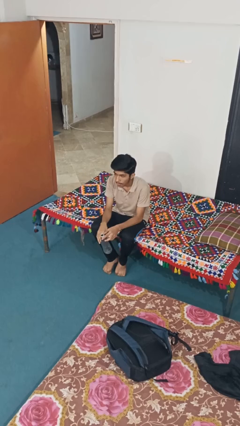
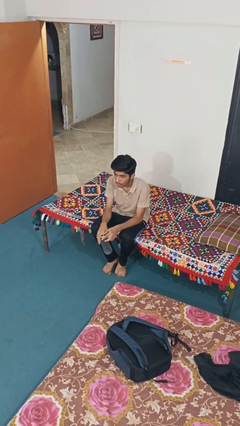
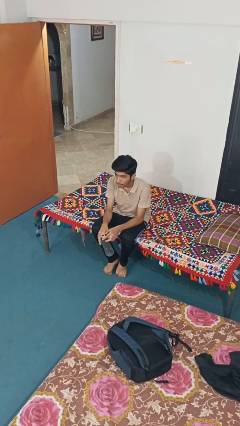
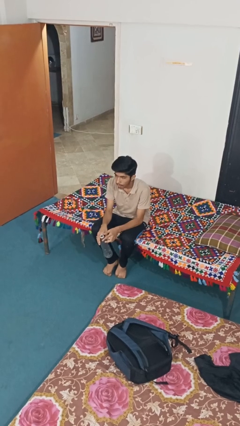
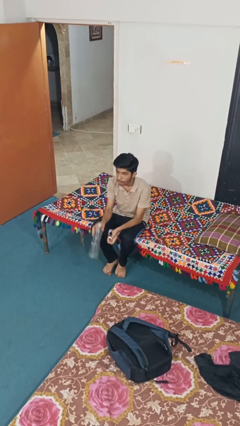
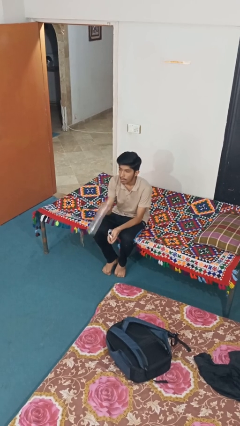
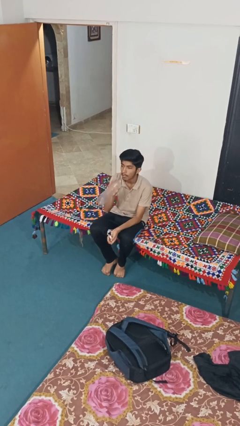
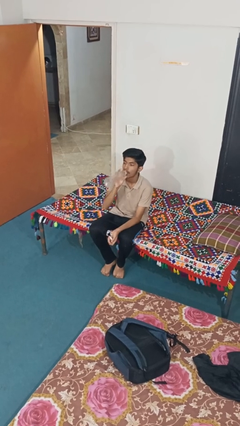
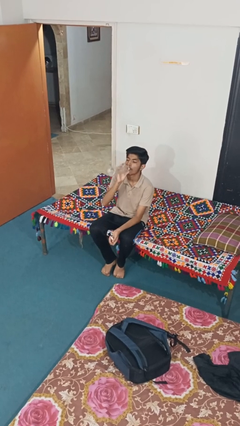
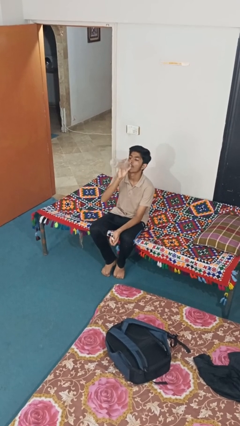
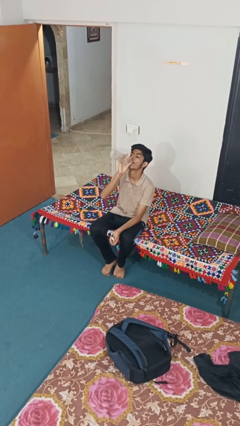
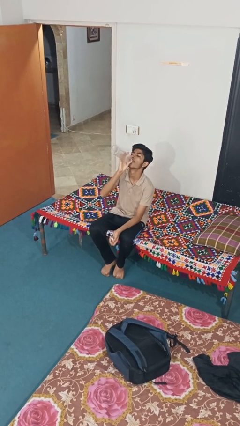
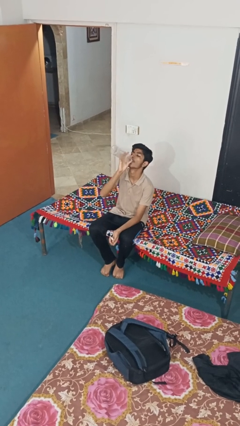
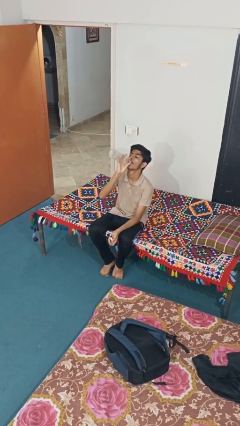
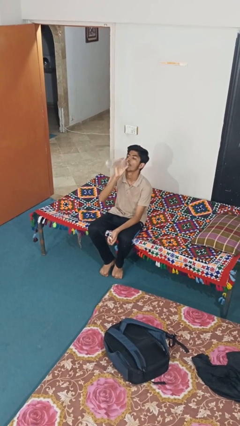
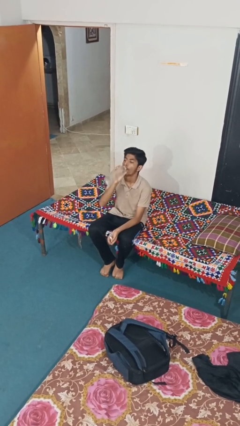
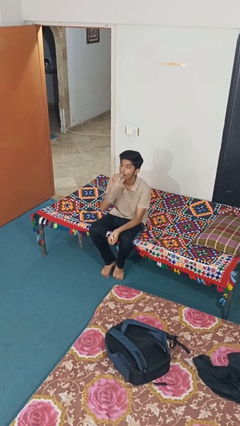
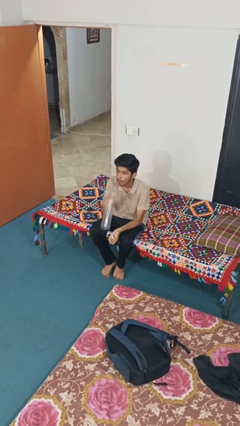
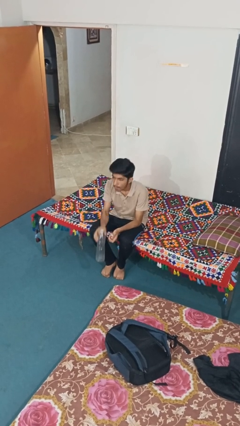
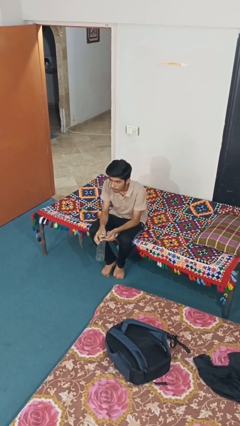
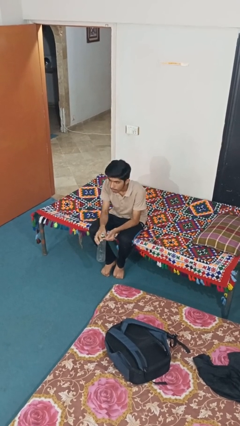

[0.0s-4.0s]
person drinks from bottle

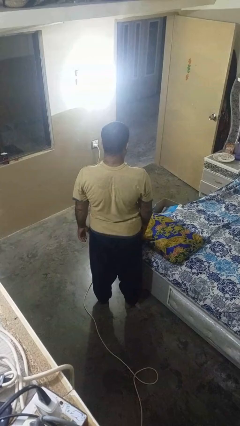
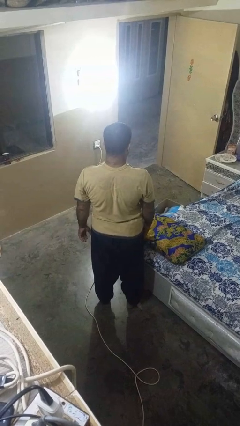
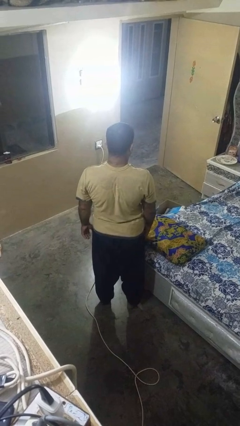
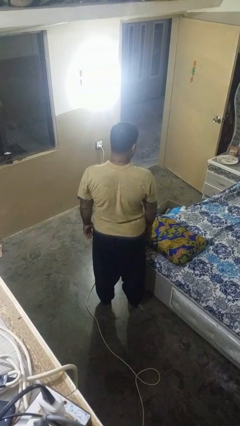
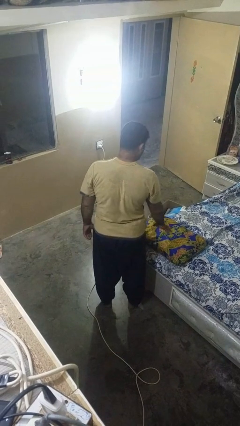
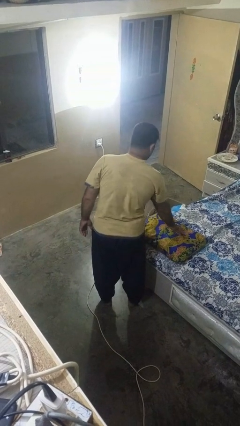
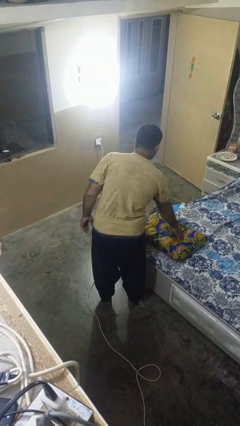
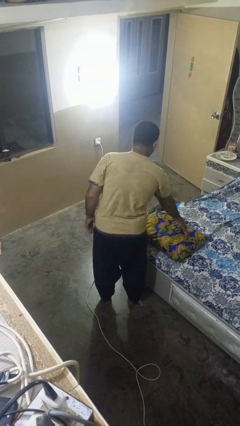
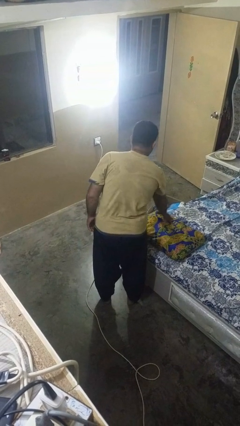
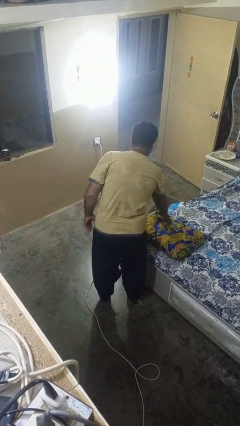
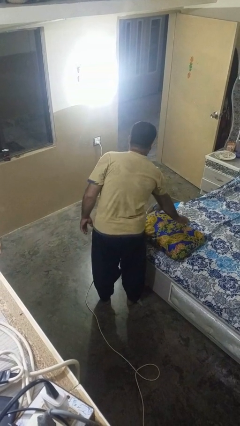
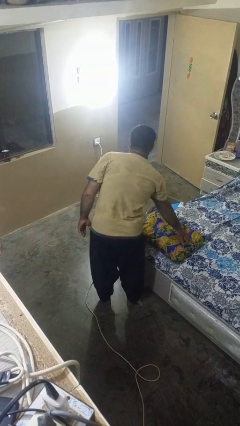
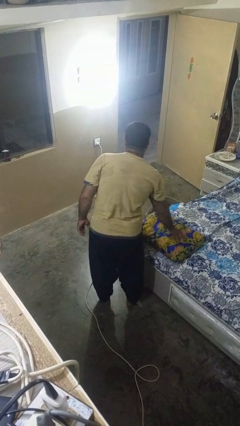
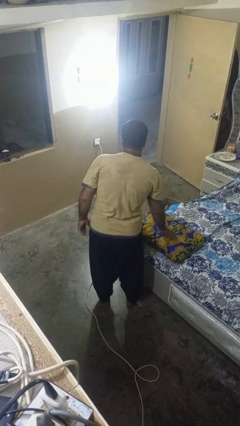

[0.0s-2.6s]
person taps object with finger

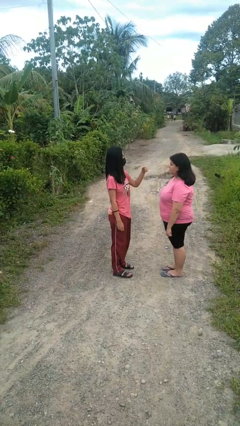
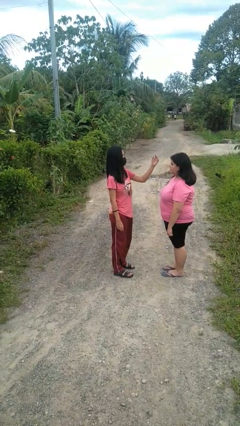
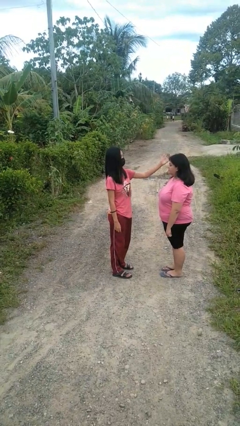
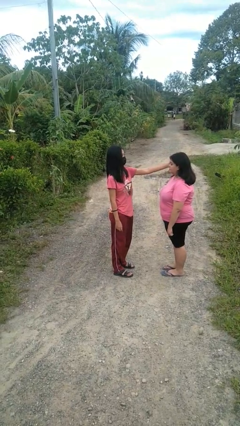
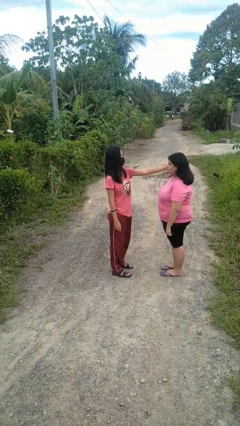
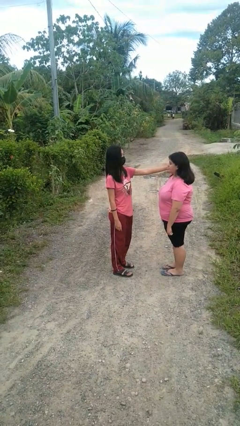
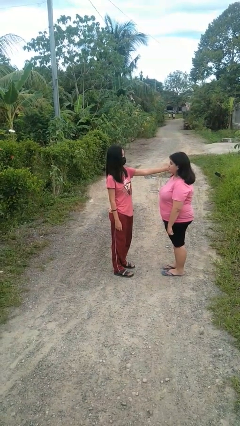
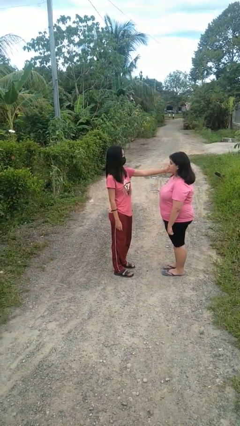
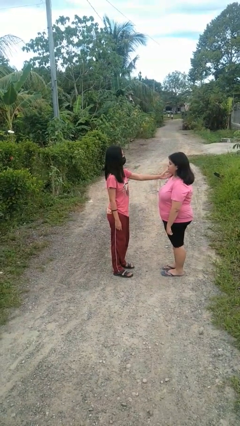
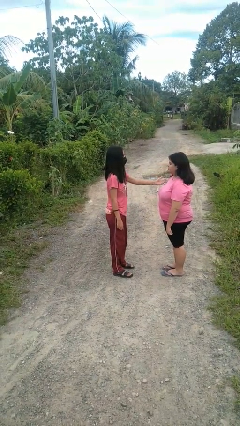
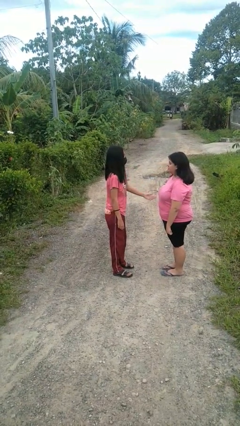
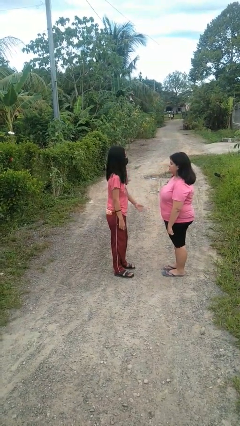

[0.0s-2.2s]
person touches face of person

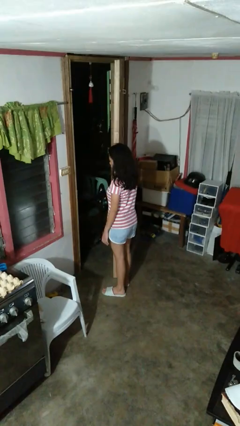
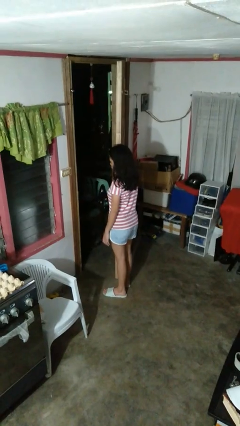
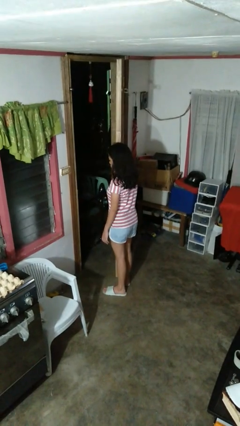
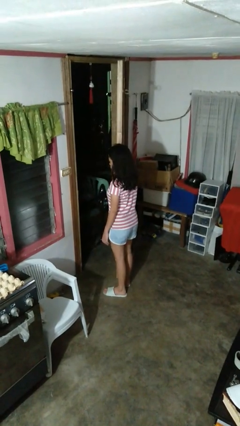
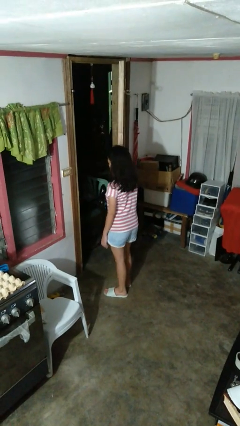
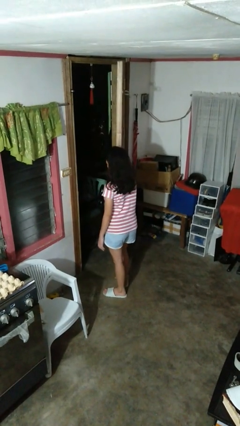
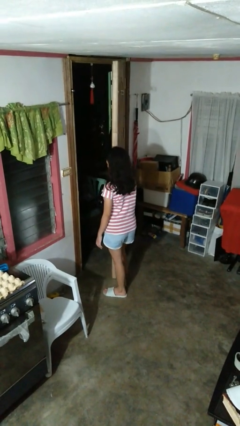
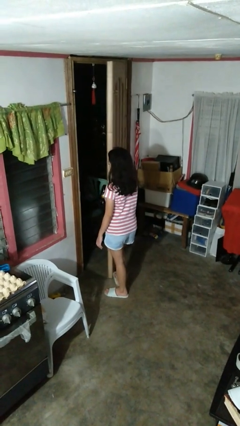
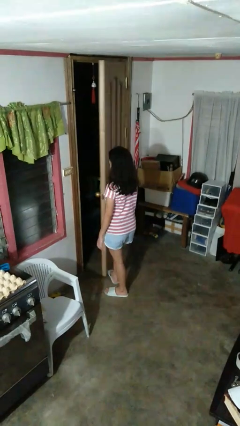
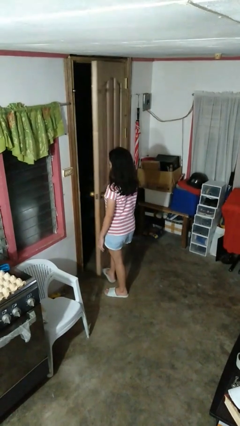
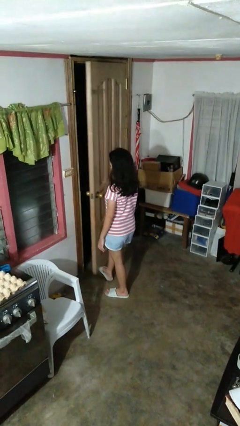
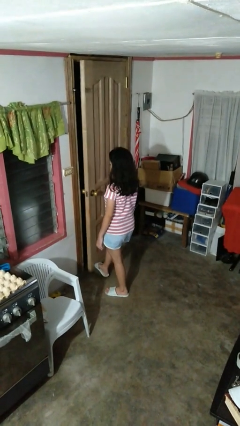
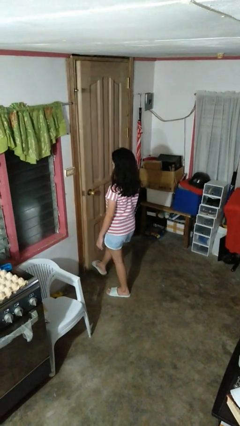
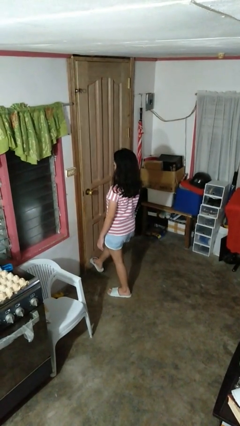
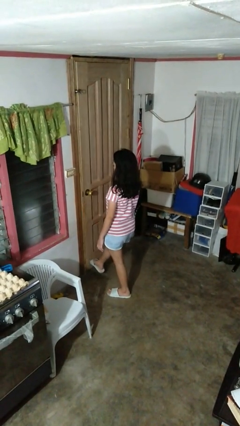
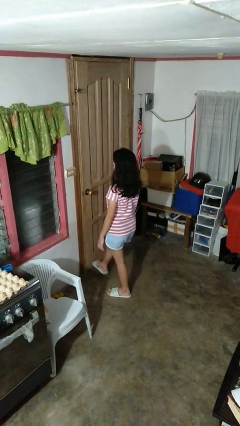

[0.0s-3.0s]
person closes door with foot

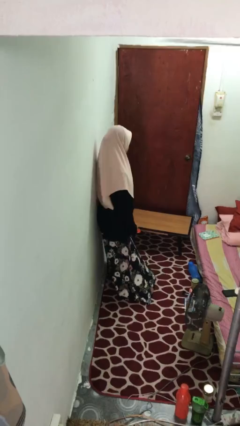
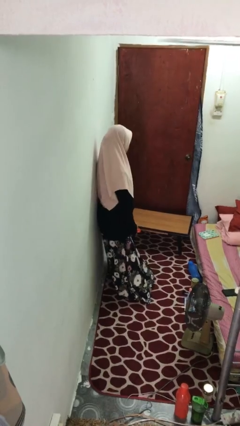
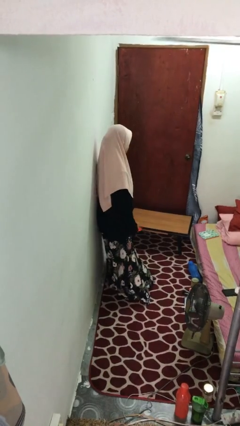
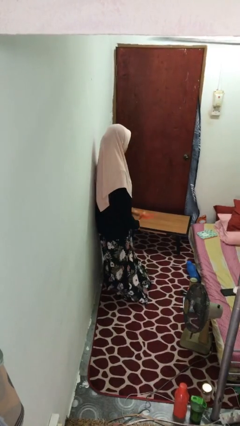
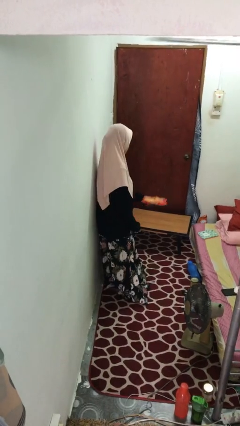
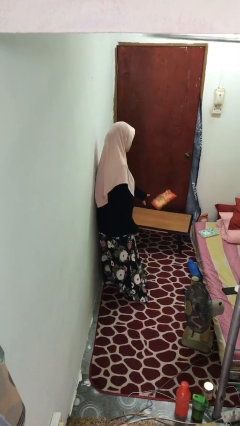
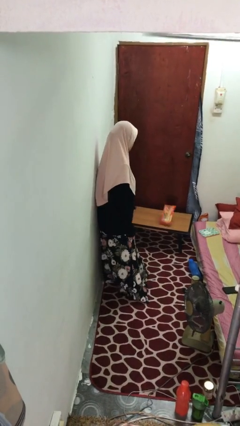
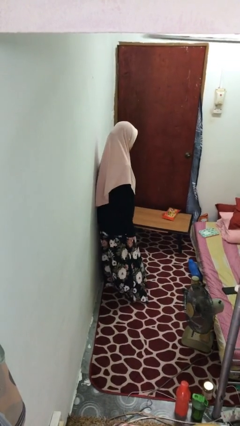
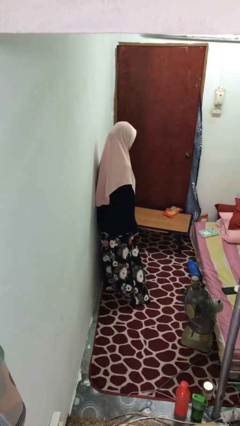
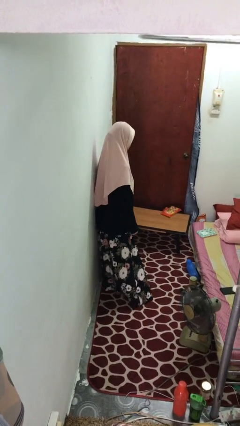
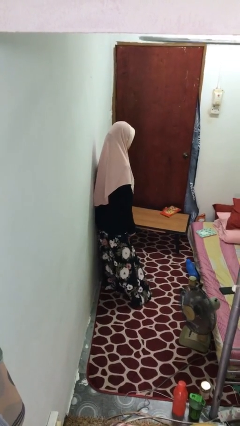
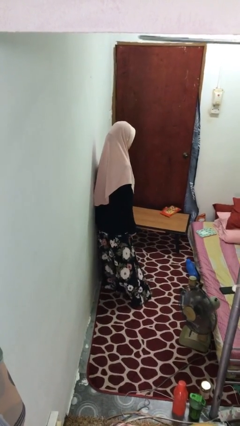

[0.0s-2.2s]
person throws object on table

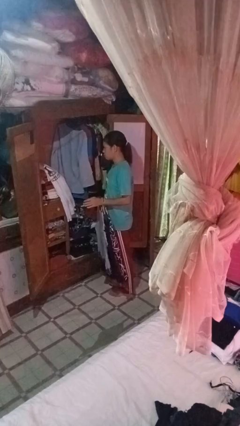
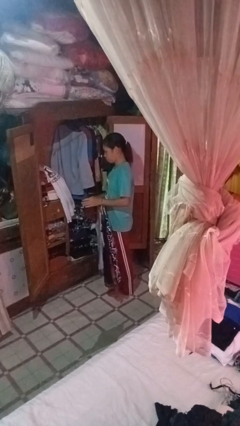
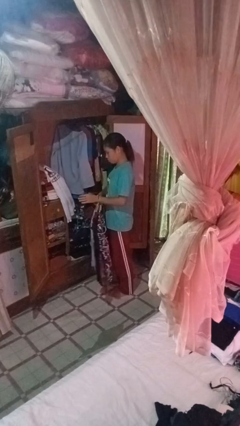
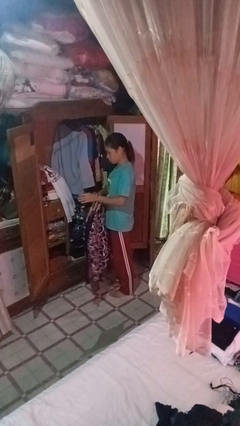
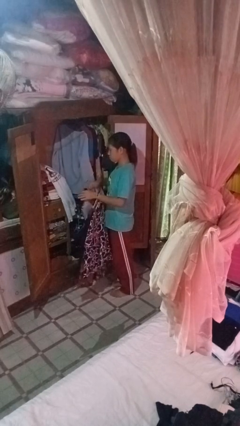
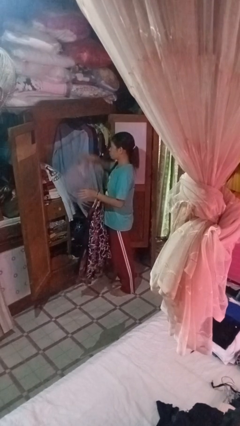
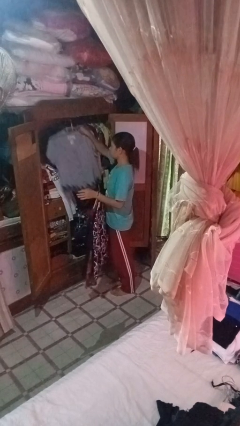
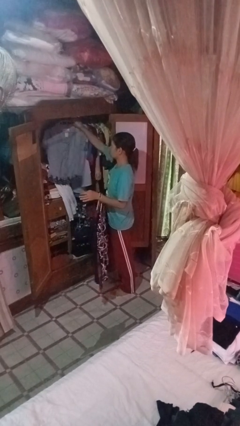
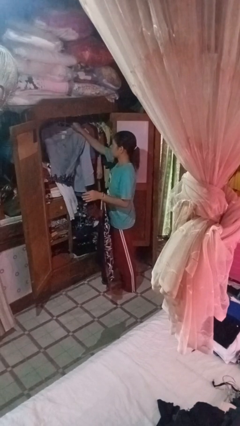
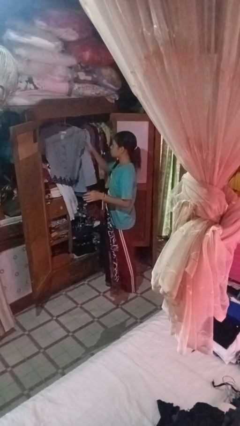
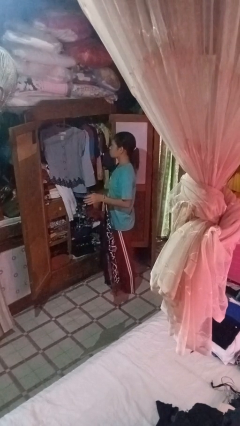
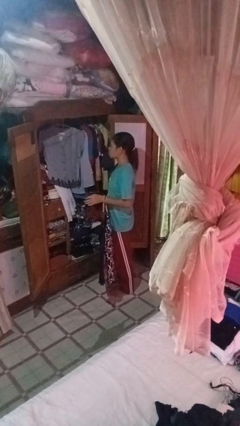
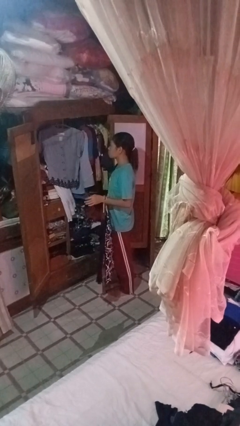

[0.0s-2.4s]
person puts clothes into closet

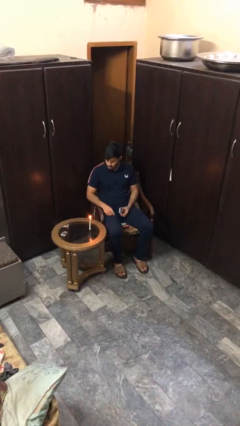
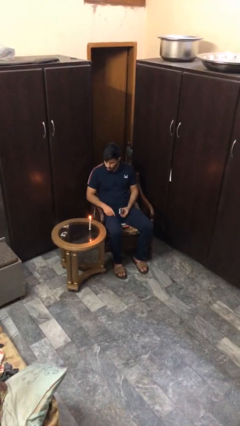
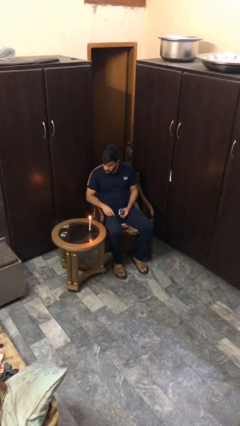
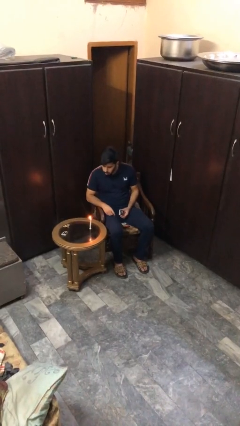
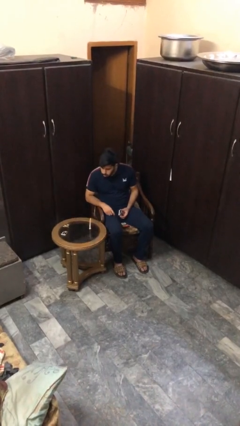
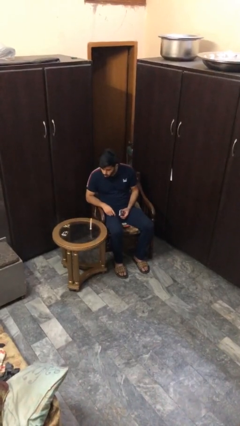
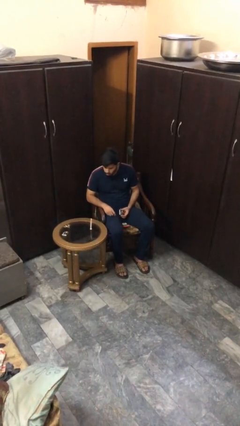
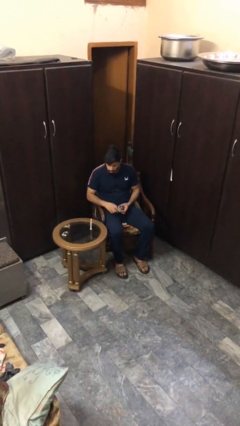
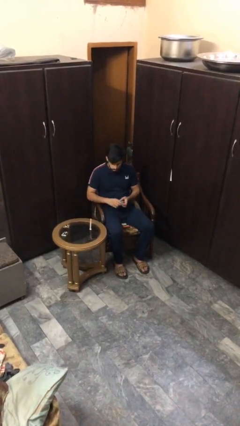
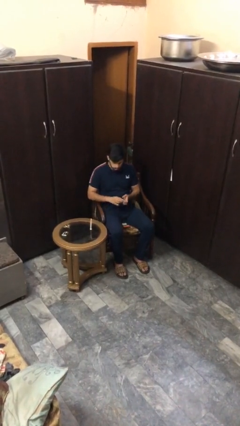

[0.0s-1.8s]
person extinguishes candle
